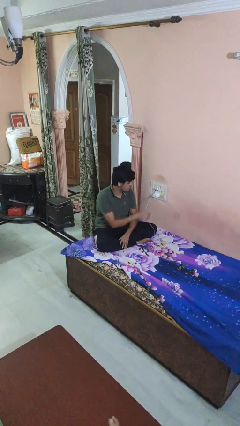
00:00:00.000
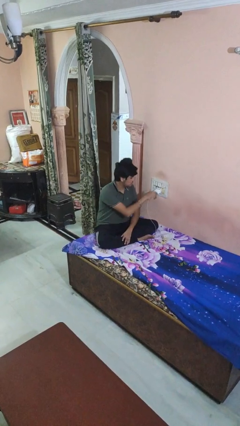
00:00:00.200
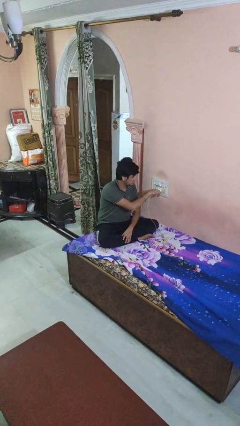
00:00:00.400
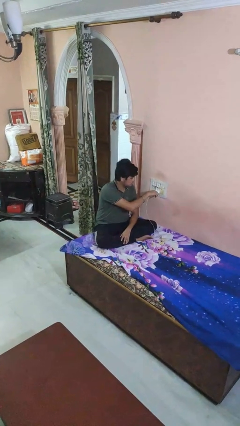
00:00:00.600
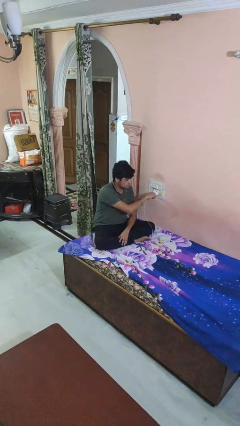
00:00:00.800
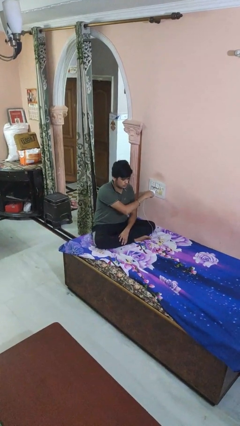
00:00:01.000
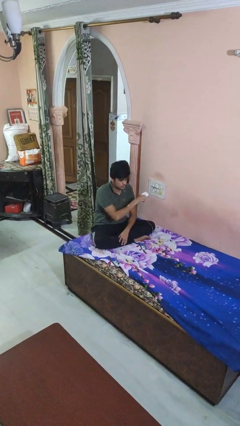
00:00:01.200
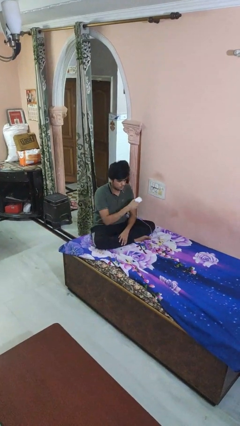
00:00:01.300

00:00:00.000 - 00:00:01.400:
person unplugs from electrical socket

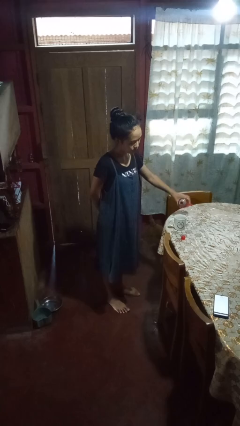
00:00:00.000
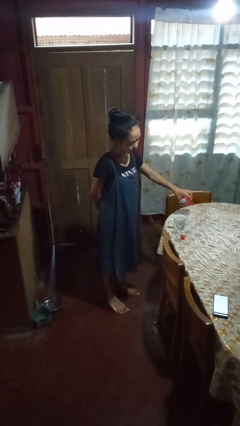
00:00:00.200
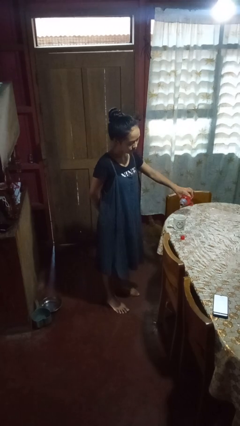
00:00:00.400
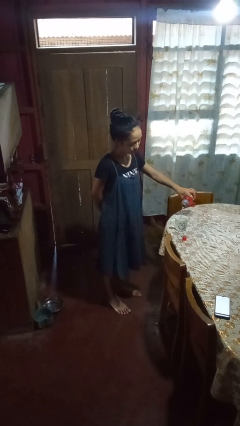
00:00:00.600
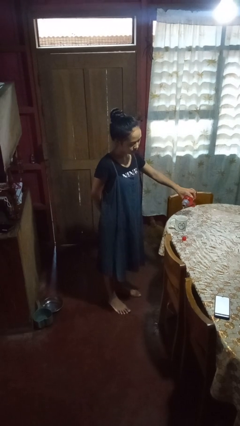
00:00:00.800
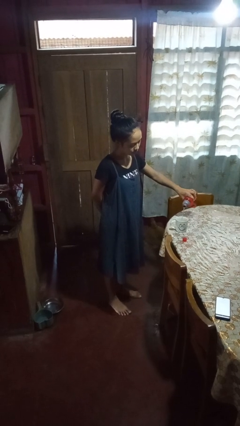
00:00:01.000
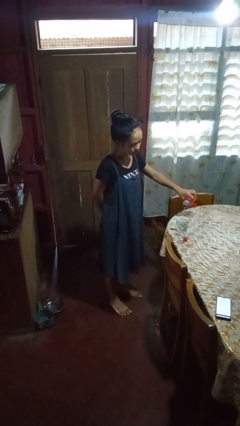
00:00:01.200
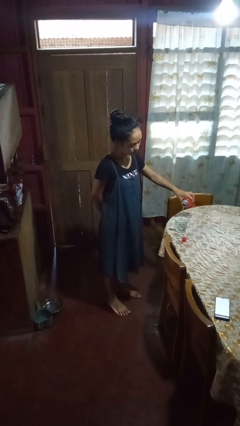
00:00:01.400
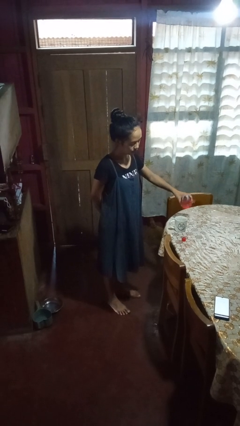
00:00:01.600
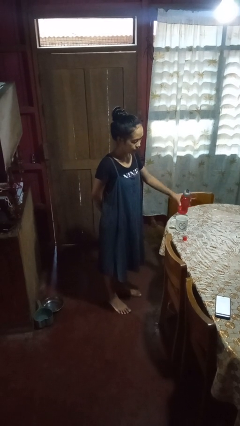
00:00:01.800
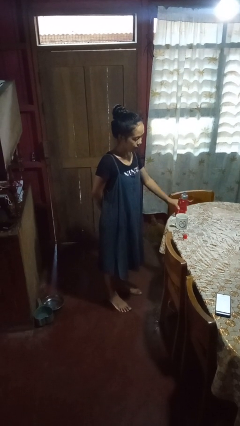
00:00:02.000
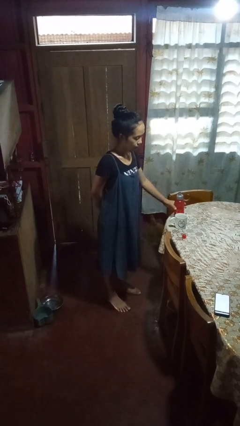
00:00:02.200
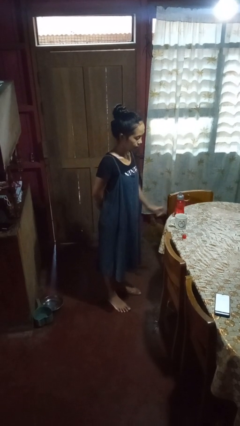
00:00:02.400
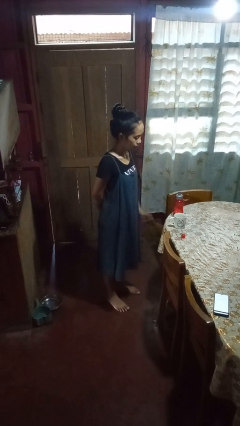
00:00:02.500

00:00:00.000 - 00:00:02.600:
person pours liquid into cup

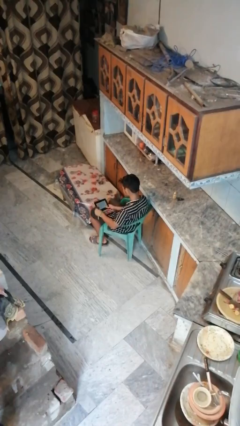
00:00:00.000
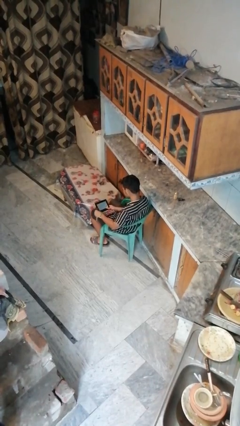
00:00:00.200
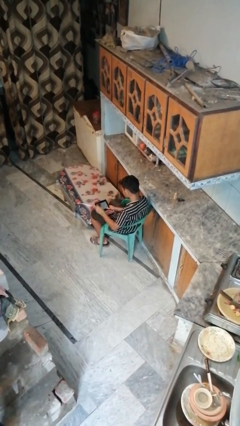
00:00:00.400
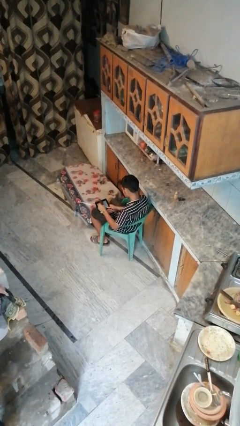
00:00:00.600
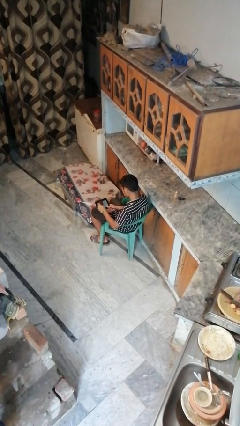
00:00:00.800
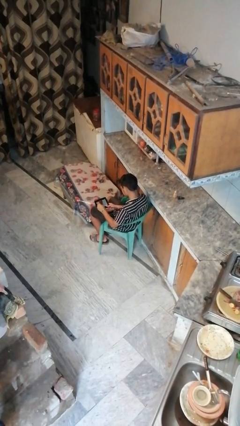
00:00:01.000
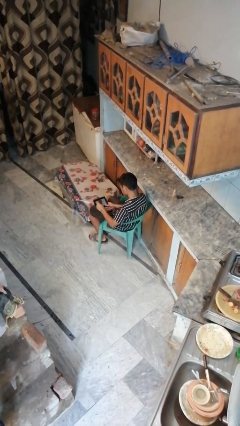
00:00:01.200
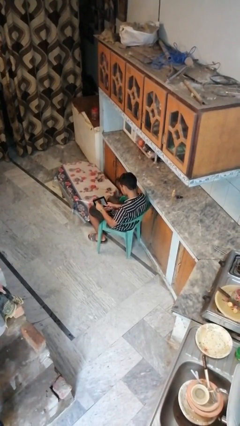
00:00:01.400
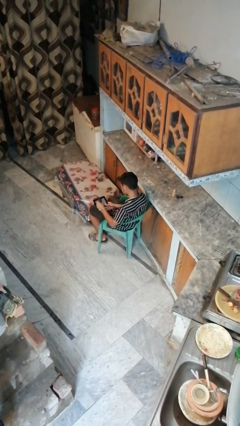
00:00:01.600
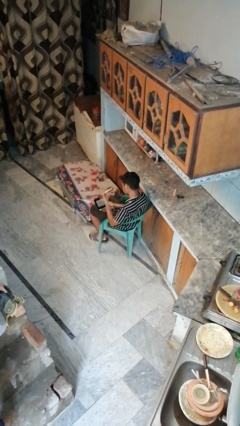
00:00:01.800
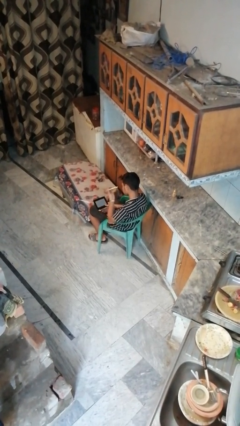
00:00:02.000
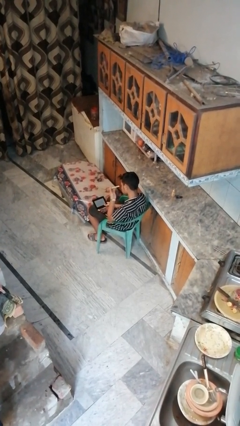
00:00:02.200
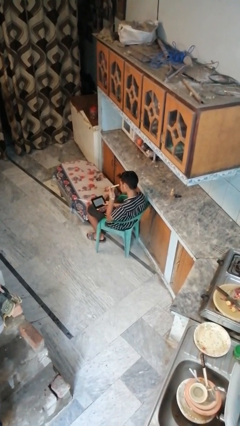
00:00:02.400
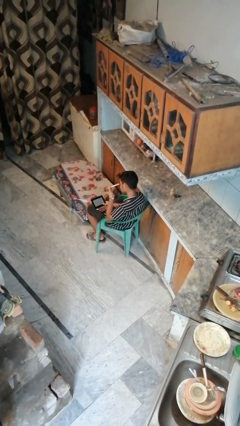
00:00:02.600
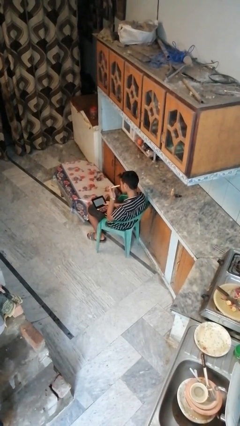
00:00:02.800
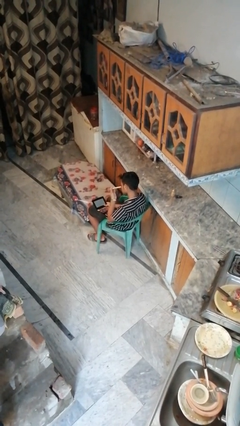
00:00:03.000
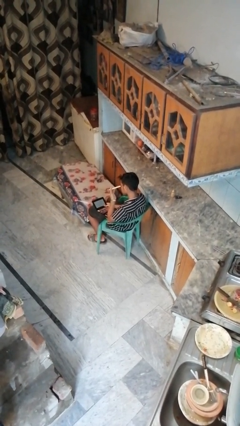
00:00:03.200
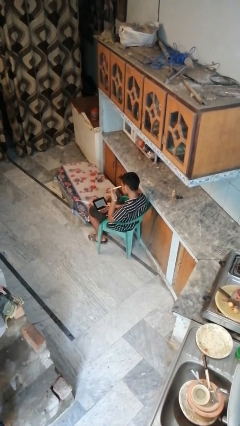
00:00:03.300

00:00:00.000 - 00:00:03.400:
person applies eye makeup

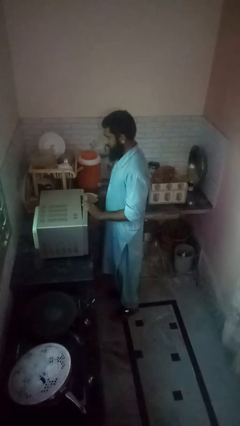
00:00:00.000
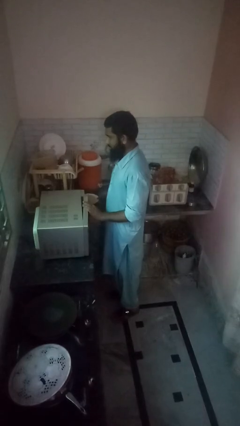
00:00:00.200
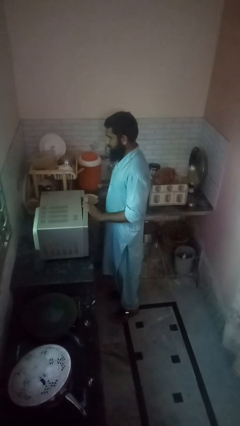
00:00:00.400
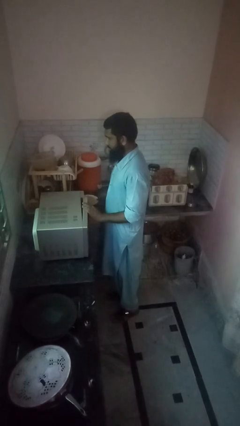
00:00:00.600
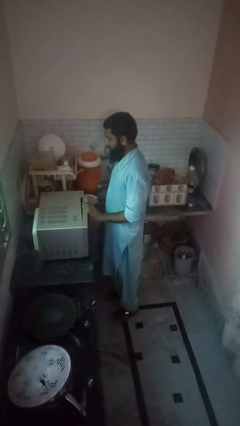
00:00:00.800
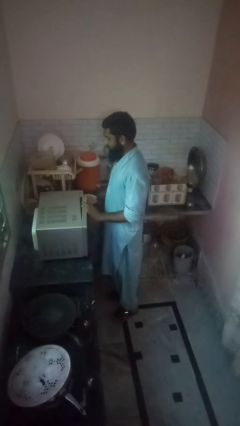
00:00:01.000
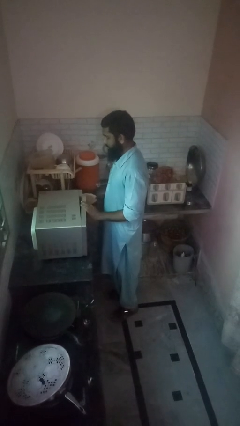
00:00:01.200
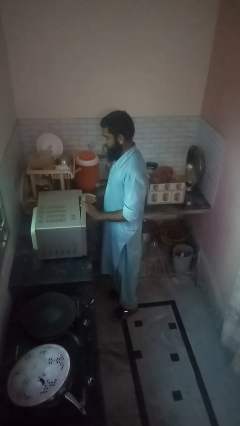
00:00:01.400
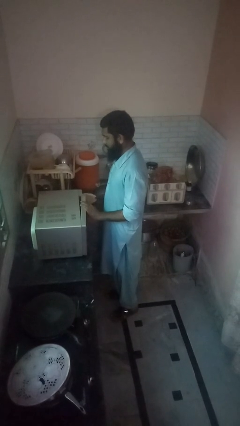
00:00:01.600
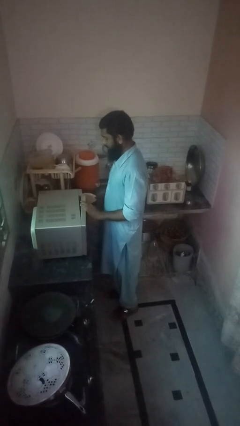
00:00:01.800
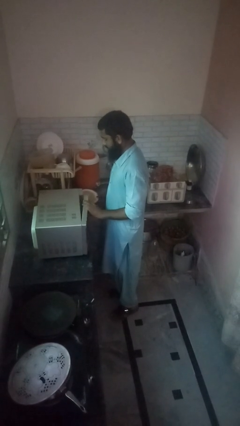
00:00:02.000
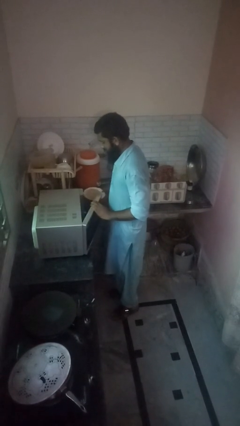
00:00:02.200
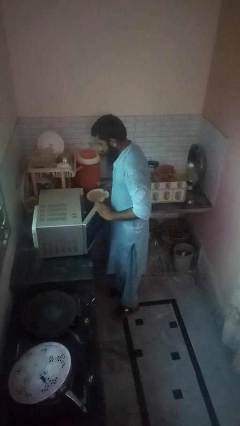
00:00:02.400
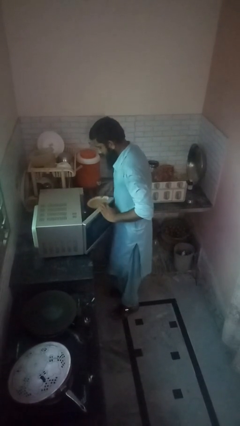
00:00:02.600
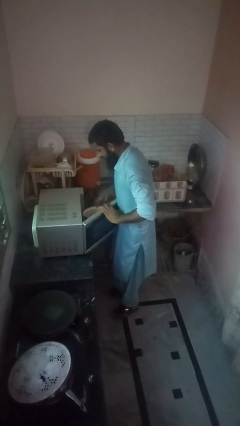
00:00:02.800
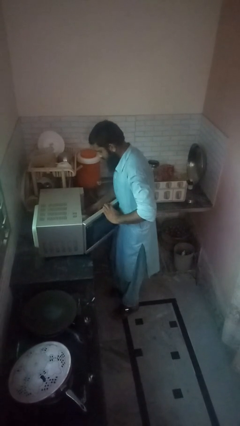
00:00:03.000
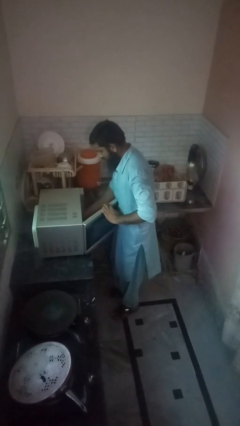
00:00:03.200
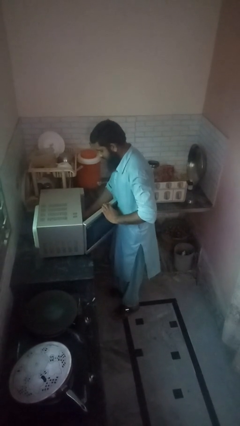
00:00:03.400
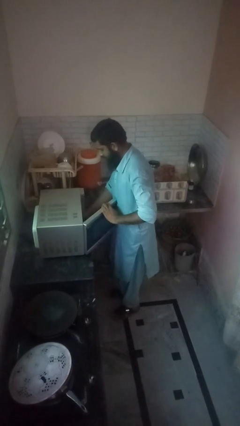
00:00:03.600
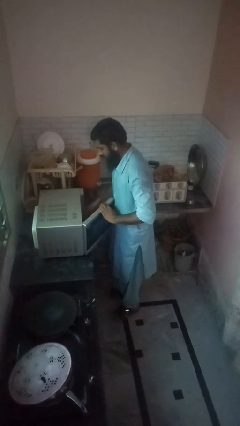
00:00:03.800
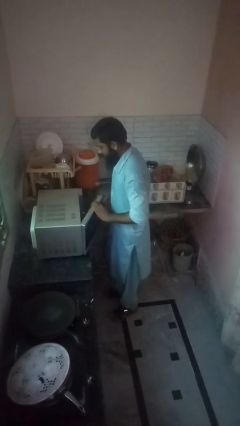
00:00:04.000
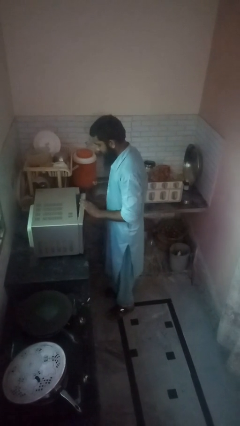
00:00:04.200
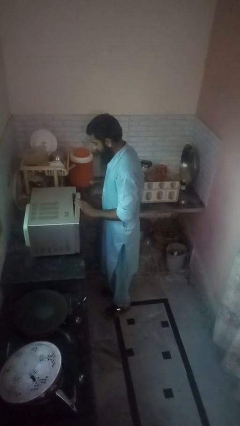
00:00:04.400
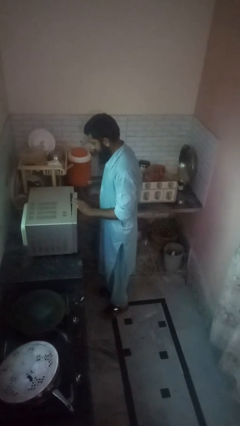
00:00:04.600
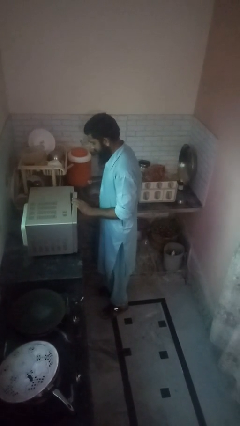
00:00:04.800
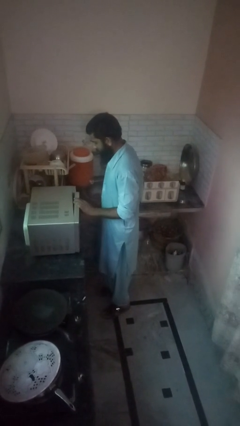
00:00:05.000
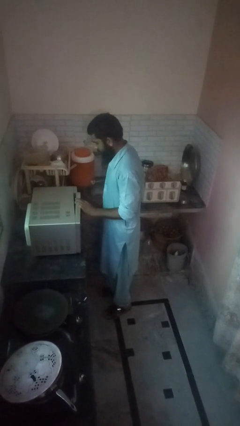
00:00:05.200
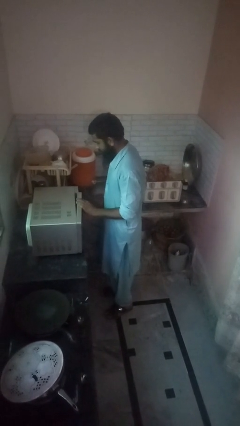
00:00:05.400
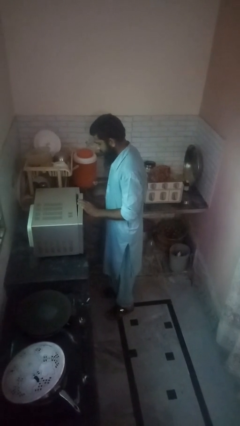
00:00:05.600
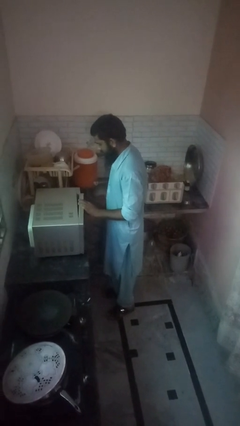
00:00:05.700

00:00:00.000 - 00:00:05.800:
person puts object into oven

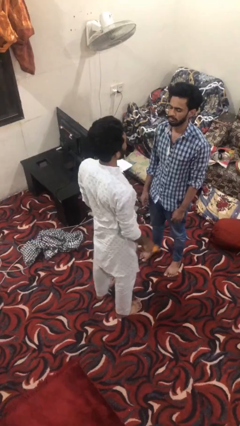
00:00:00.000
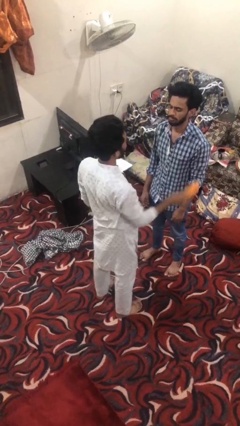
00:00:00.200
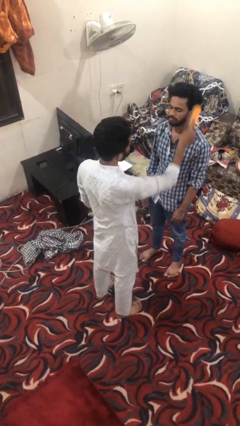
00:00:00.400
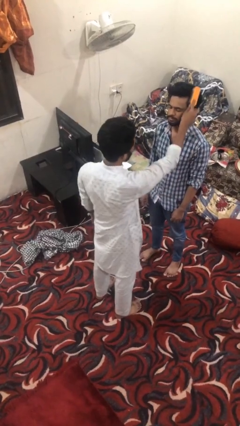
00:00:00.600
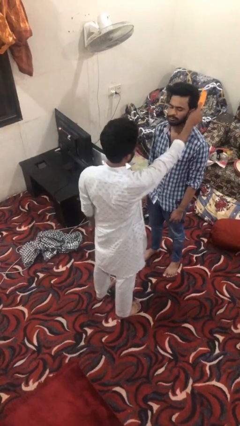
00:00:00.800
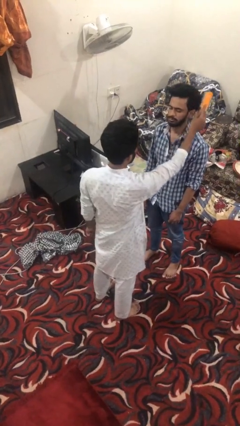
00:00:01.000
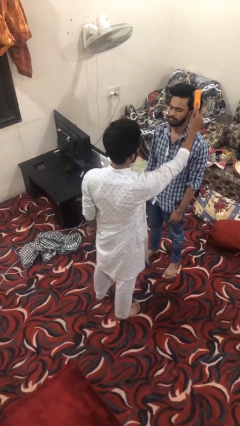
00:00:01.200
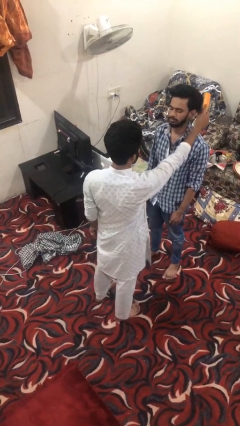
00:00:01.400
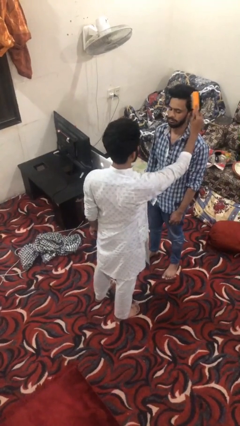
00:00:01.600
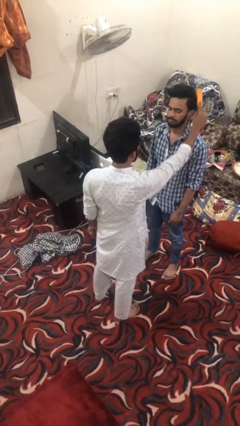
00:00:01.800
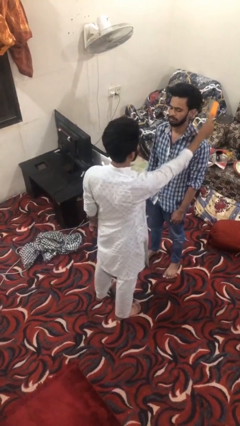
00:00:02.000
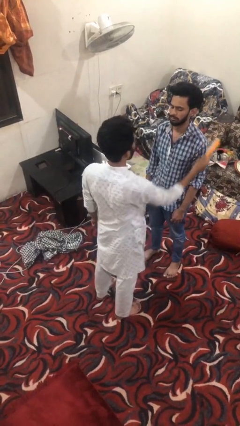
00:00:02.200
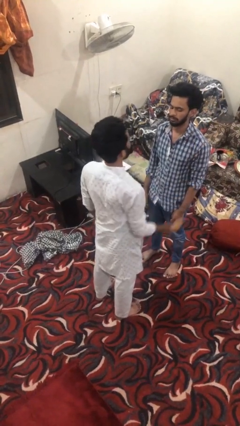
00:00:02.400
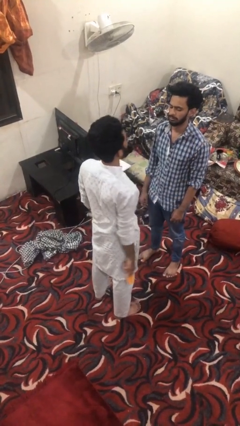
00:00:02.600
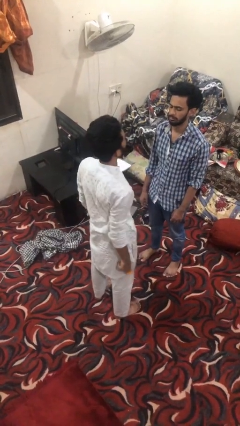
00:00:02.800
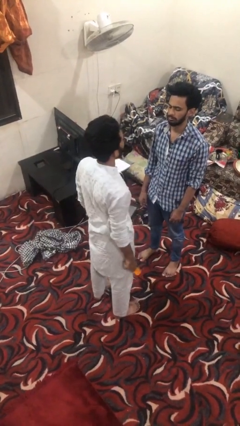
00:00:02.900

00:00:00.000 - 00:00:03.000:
person brushes hair of person

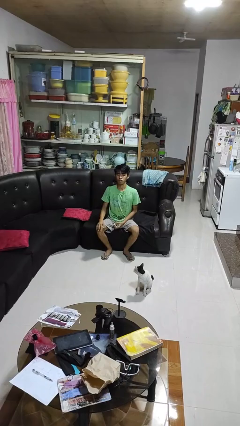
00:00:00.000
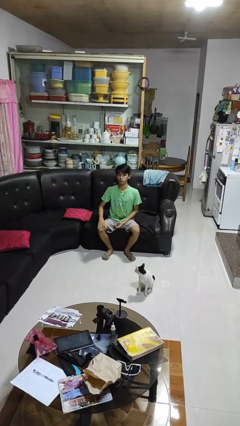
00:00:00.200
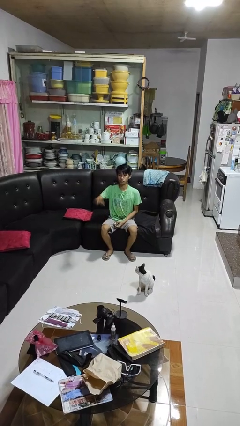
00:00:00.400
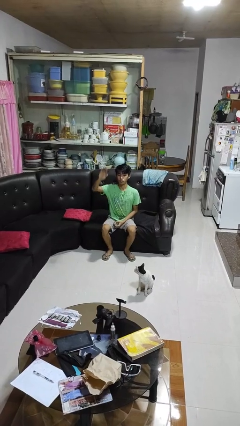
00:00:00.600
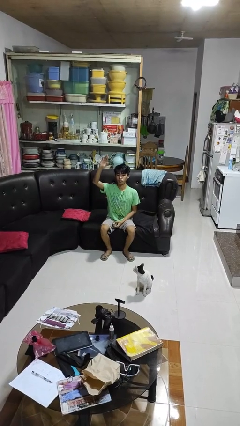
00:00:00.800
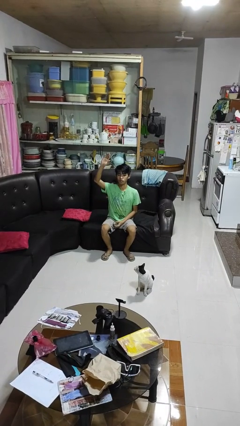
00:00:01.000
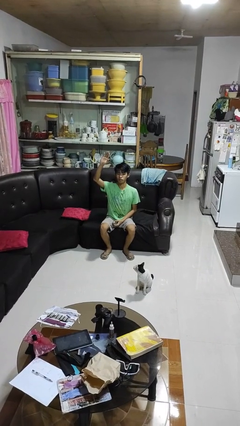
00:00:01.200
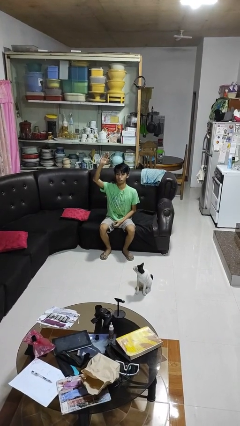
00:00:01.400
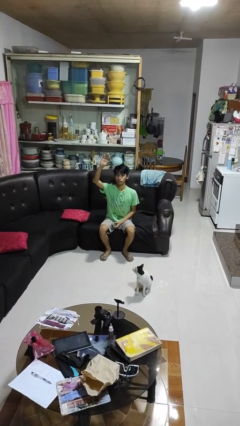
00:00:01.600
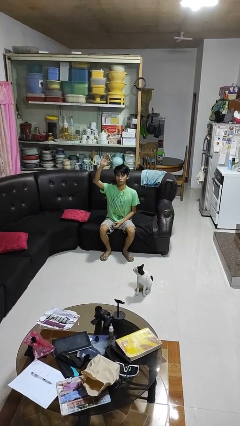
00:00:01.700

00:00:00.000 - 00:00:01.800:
person gestures raise hand
